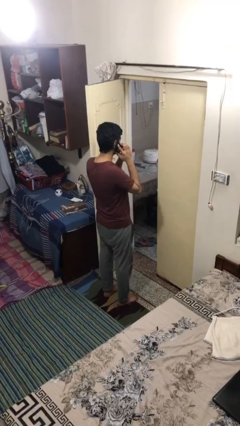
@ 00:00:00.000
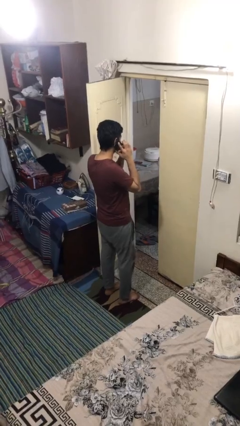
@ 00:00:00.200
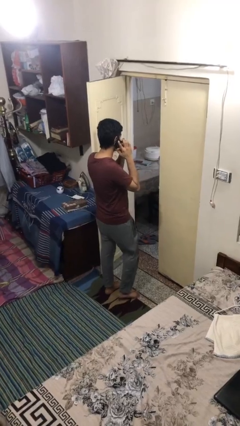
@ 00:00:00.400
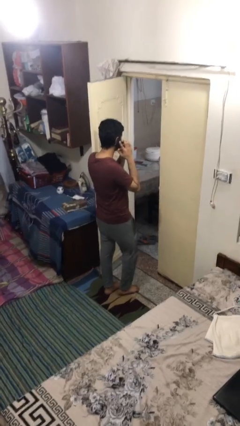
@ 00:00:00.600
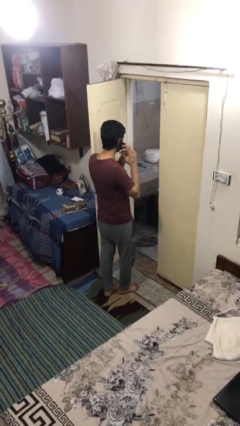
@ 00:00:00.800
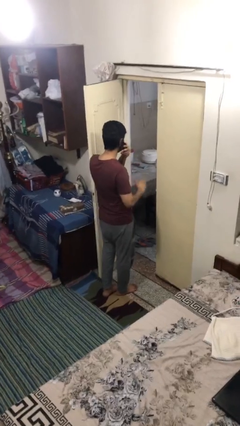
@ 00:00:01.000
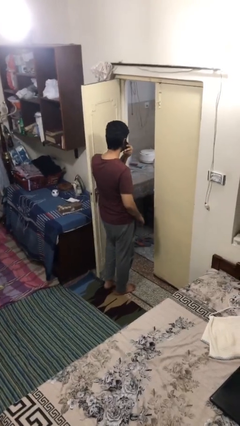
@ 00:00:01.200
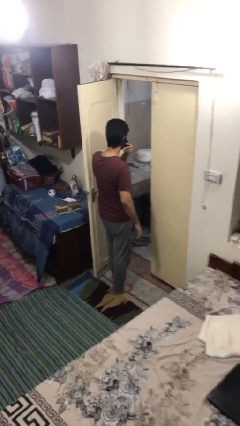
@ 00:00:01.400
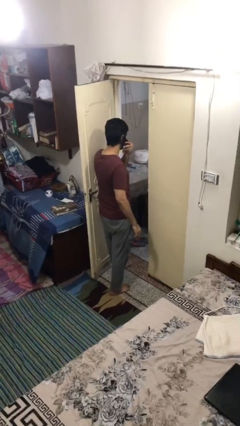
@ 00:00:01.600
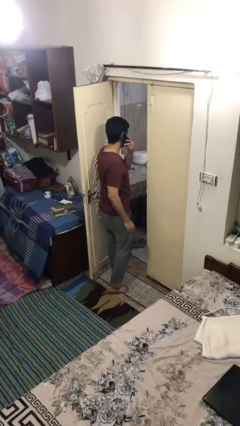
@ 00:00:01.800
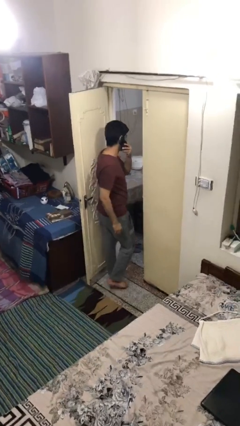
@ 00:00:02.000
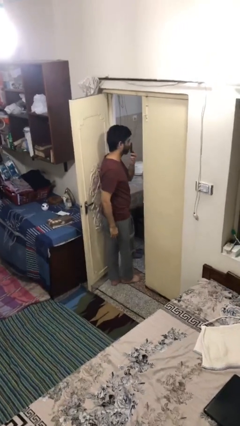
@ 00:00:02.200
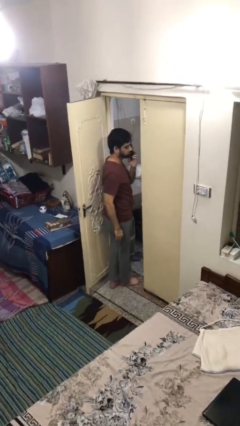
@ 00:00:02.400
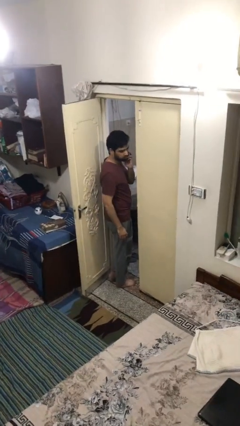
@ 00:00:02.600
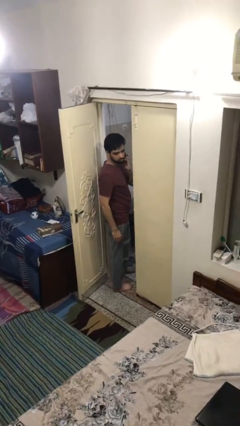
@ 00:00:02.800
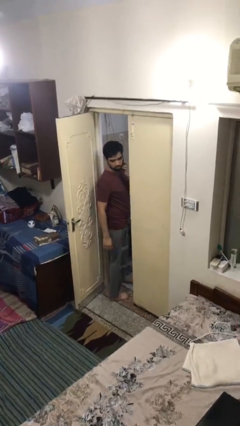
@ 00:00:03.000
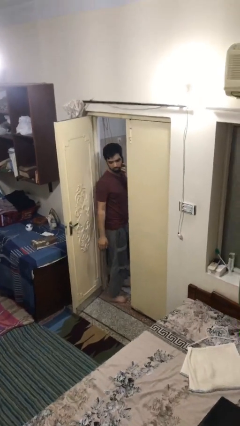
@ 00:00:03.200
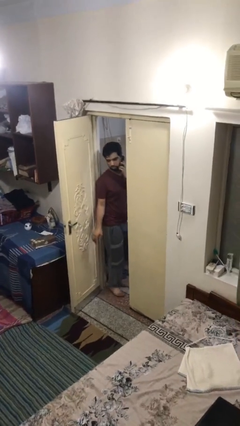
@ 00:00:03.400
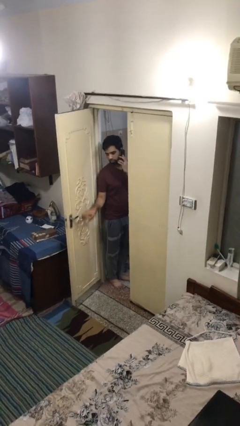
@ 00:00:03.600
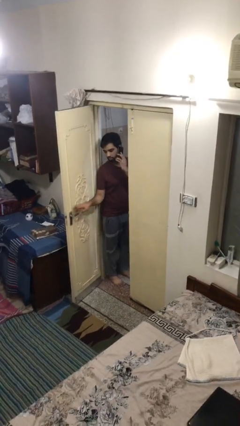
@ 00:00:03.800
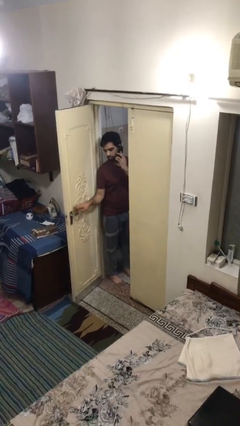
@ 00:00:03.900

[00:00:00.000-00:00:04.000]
person exits scene through structure

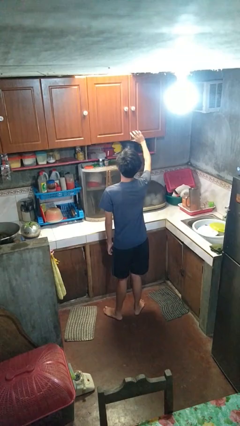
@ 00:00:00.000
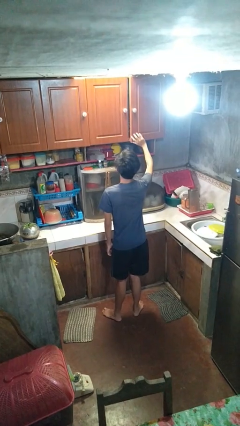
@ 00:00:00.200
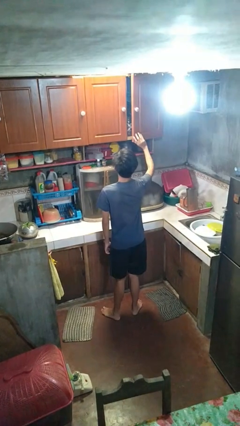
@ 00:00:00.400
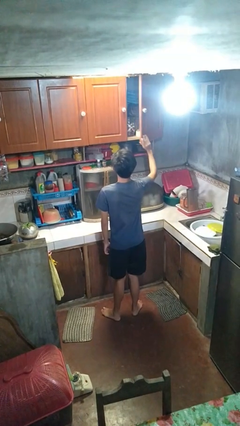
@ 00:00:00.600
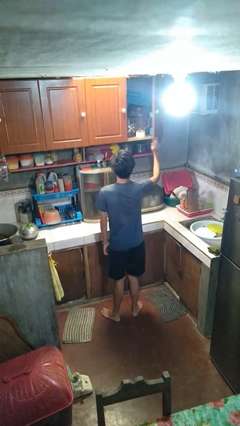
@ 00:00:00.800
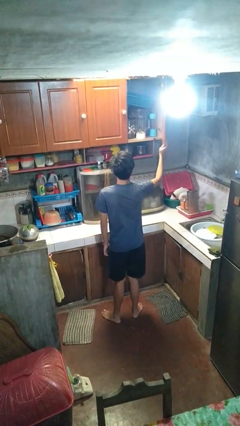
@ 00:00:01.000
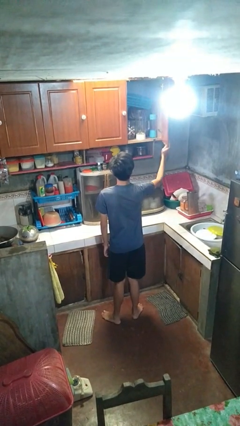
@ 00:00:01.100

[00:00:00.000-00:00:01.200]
person opens cabinet

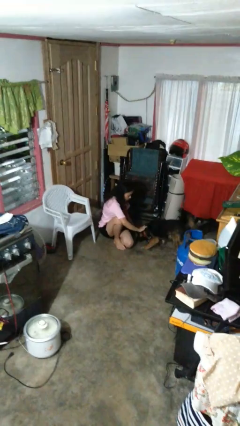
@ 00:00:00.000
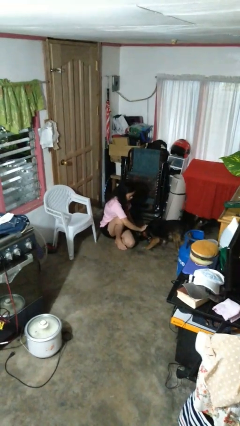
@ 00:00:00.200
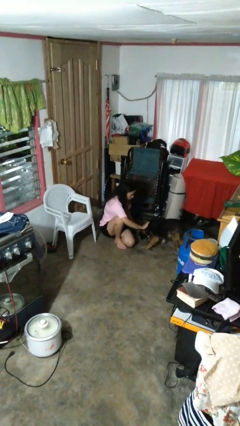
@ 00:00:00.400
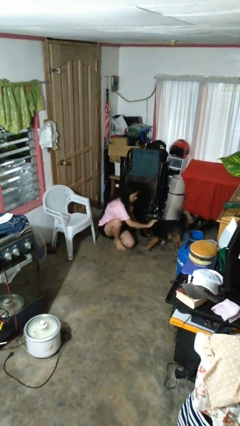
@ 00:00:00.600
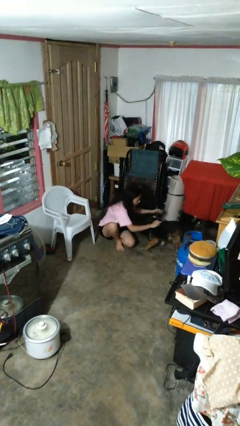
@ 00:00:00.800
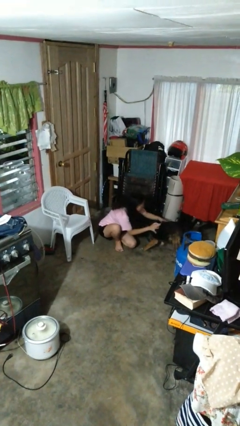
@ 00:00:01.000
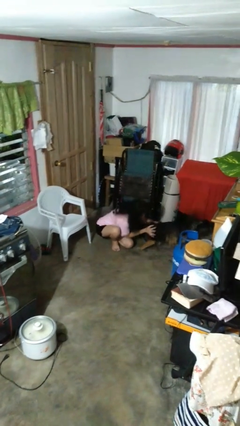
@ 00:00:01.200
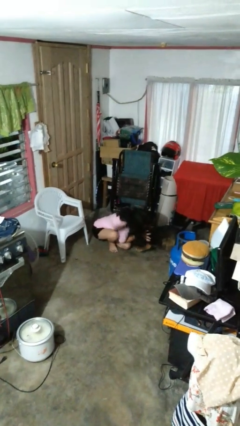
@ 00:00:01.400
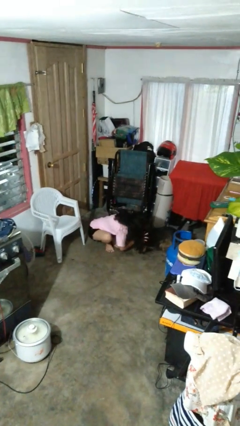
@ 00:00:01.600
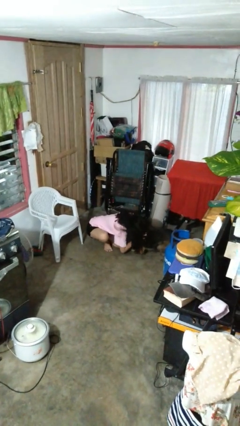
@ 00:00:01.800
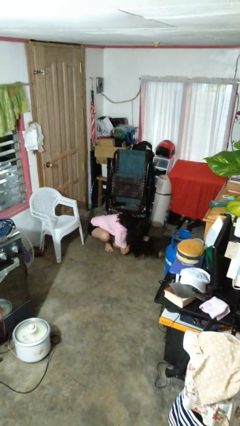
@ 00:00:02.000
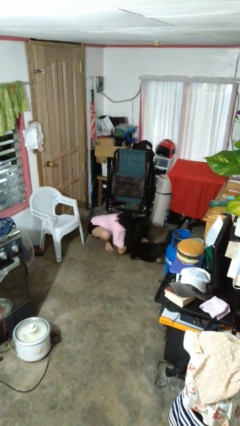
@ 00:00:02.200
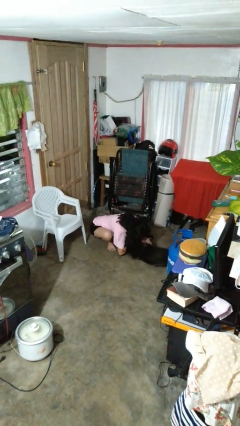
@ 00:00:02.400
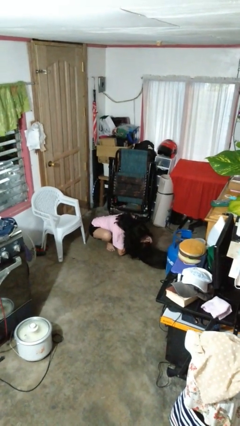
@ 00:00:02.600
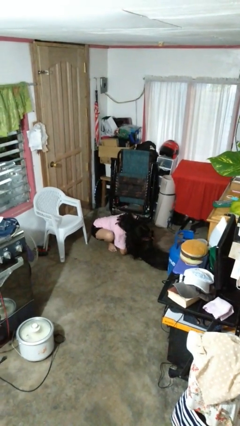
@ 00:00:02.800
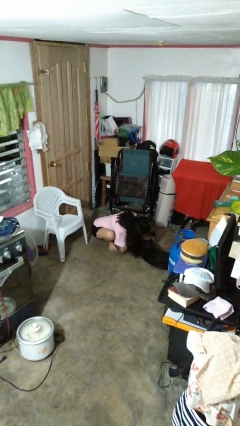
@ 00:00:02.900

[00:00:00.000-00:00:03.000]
person hugs dog

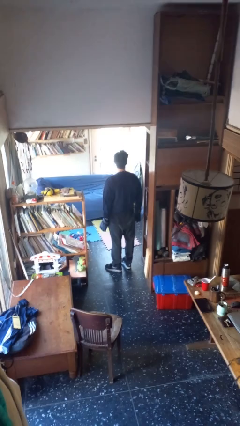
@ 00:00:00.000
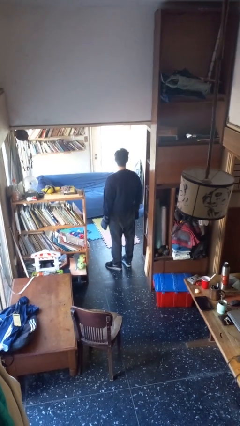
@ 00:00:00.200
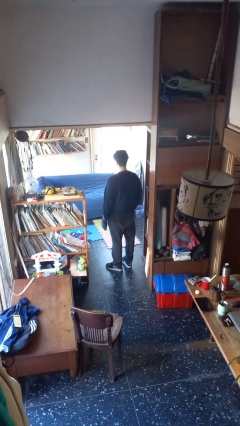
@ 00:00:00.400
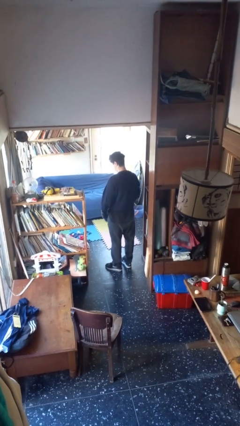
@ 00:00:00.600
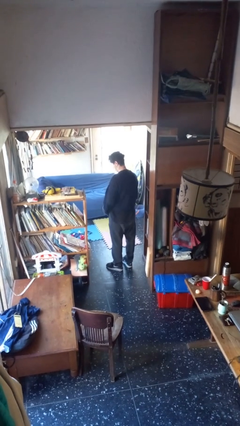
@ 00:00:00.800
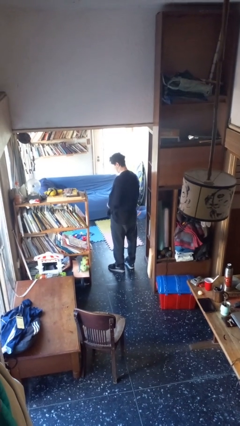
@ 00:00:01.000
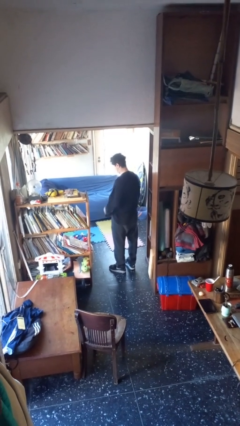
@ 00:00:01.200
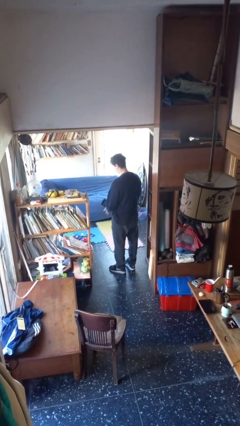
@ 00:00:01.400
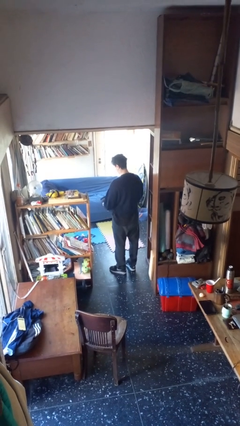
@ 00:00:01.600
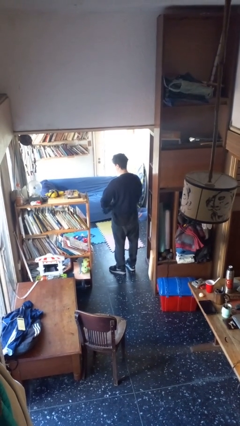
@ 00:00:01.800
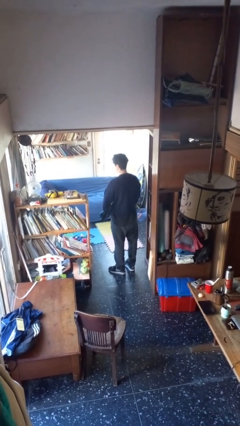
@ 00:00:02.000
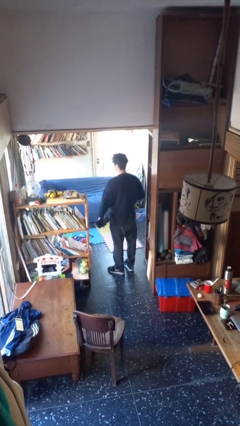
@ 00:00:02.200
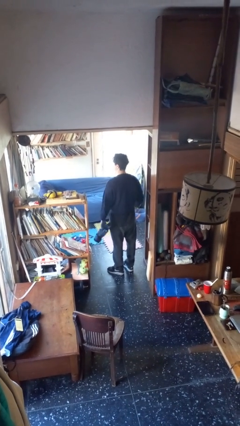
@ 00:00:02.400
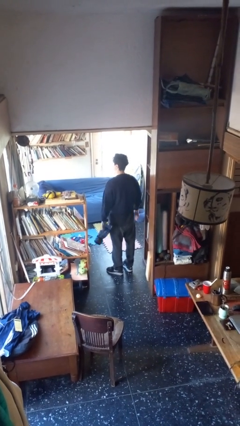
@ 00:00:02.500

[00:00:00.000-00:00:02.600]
person takes off gloves

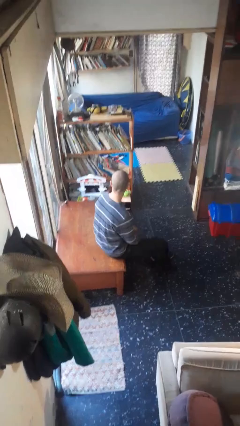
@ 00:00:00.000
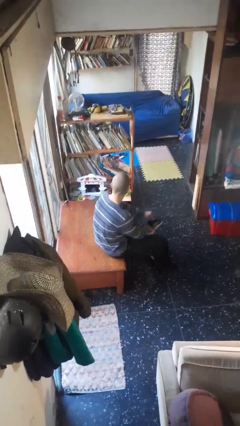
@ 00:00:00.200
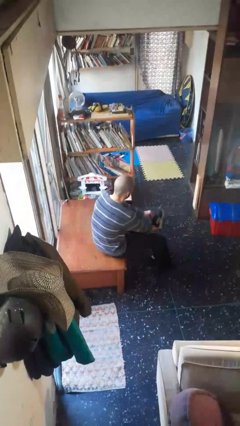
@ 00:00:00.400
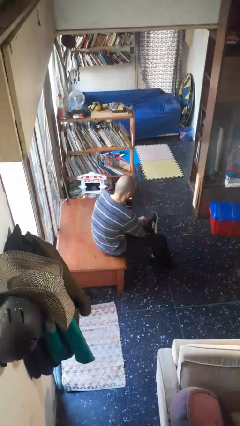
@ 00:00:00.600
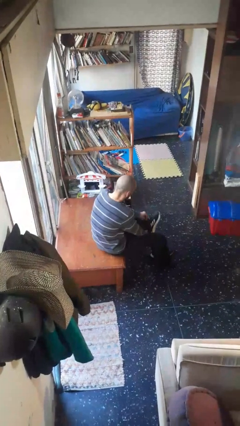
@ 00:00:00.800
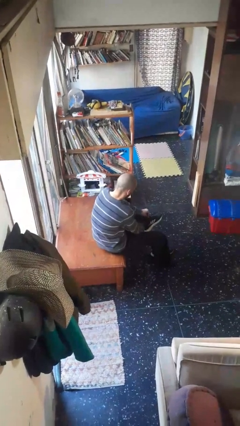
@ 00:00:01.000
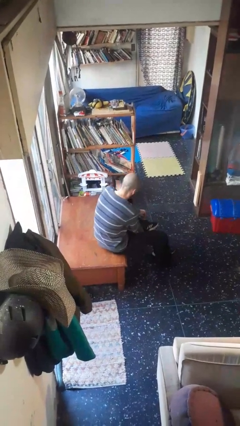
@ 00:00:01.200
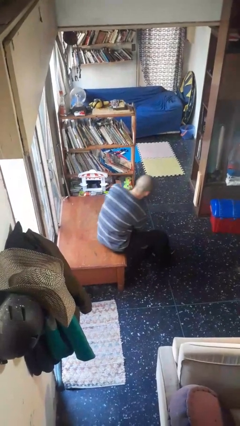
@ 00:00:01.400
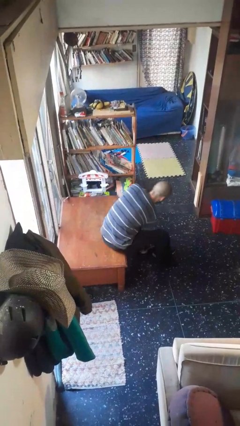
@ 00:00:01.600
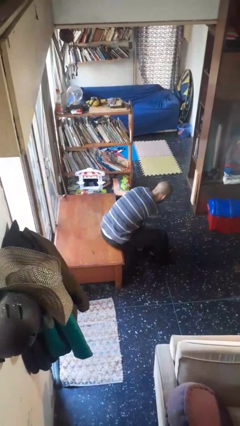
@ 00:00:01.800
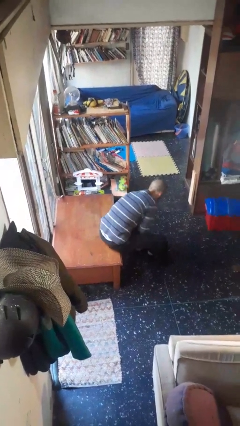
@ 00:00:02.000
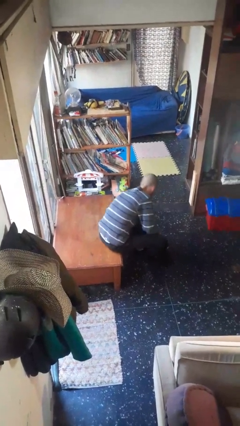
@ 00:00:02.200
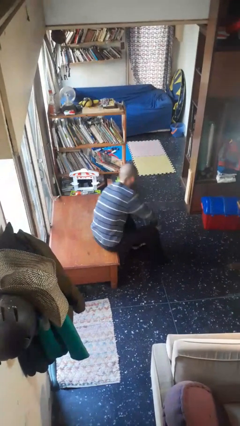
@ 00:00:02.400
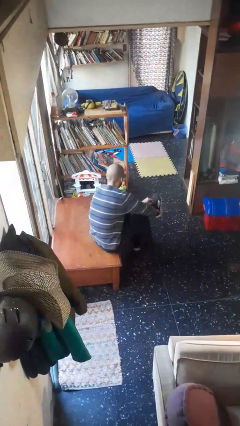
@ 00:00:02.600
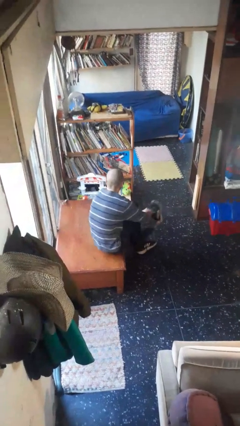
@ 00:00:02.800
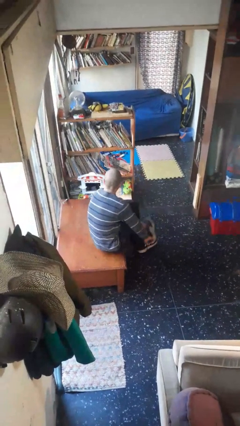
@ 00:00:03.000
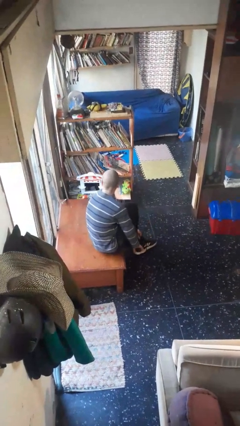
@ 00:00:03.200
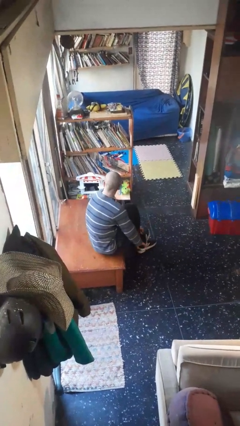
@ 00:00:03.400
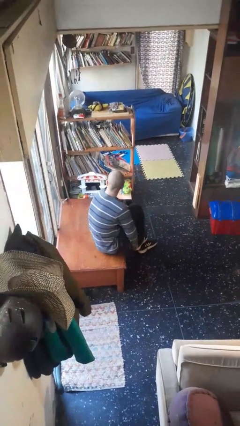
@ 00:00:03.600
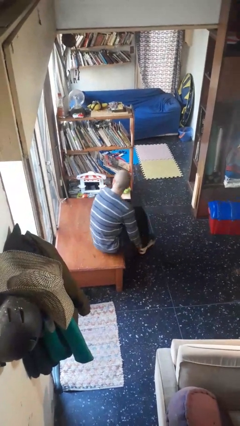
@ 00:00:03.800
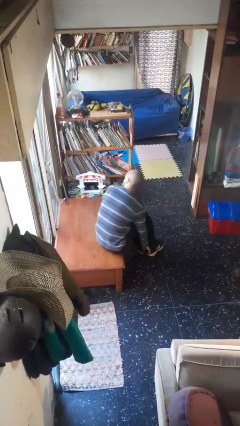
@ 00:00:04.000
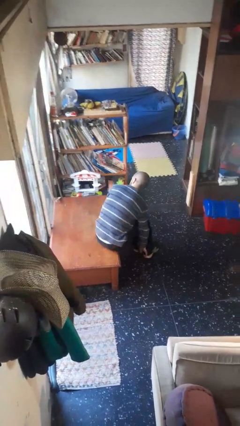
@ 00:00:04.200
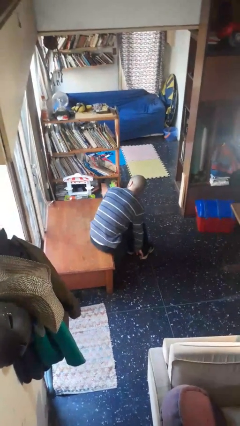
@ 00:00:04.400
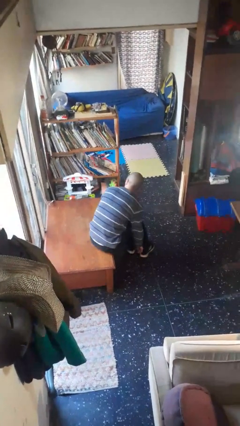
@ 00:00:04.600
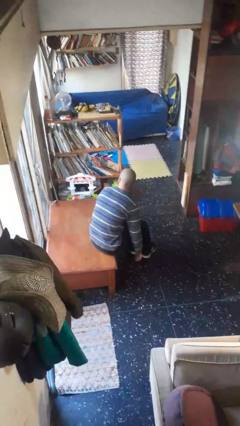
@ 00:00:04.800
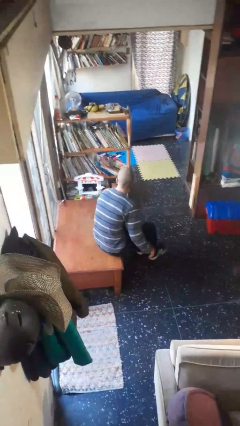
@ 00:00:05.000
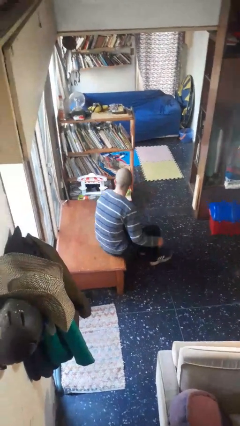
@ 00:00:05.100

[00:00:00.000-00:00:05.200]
person puts on shoes

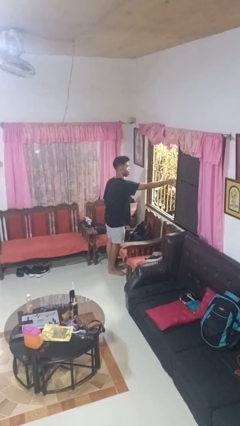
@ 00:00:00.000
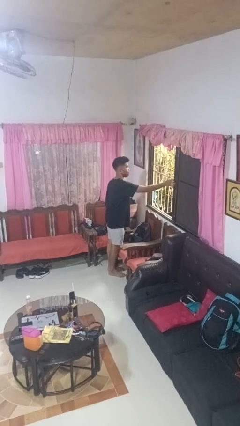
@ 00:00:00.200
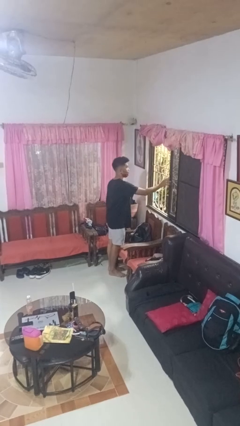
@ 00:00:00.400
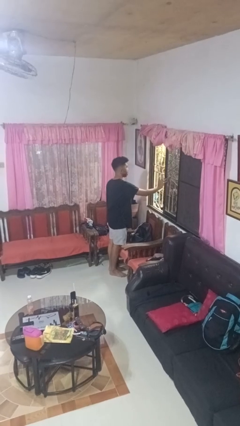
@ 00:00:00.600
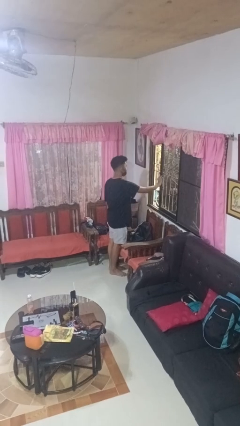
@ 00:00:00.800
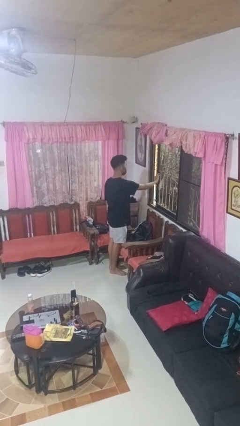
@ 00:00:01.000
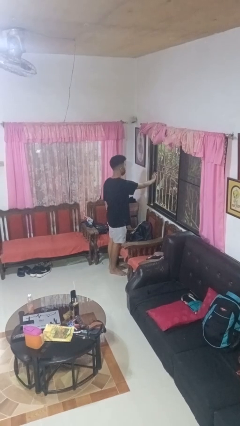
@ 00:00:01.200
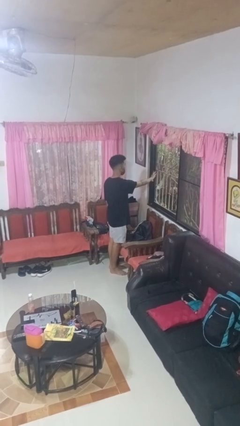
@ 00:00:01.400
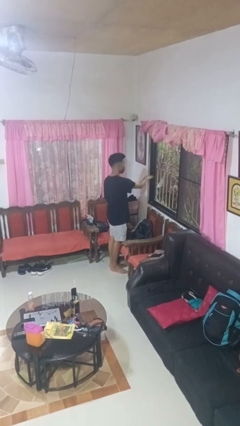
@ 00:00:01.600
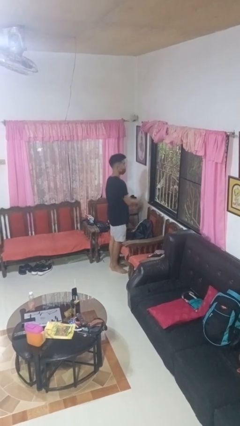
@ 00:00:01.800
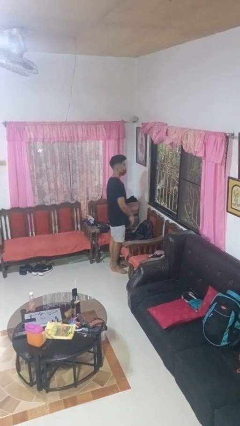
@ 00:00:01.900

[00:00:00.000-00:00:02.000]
person closes home window
